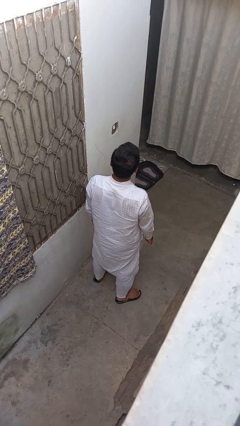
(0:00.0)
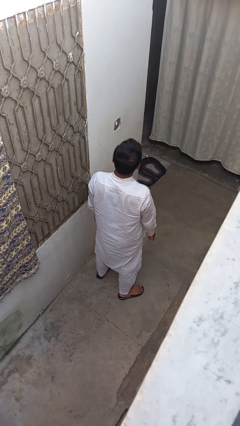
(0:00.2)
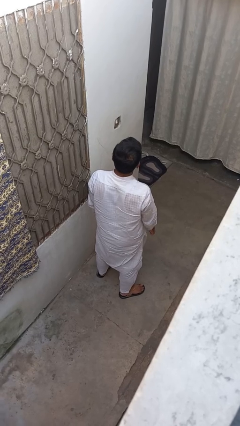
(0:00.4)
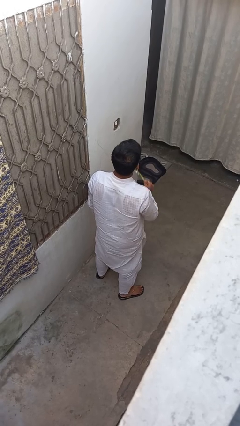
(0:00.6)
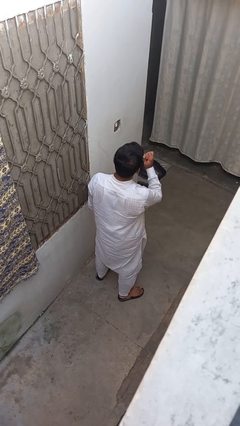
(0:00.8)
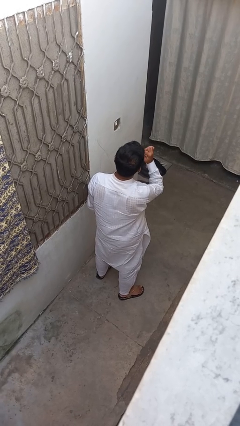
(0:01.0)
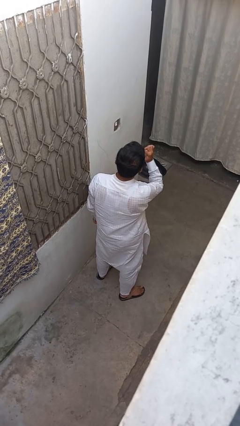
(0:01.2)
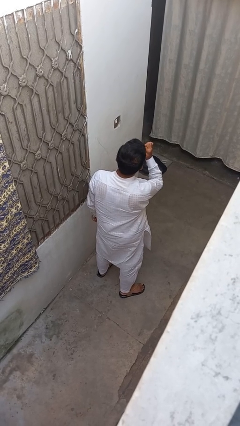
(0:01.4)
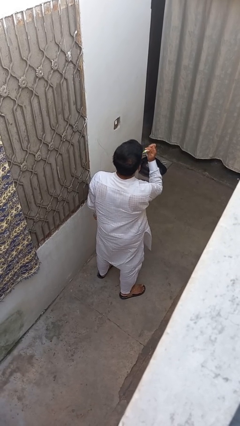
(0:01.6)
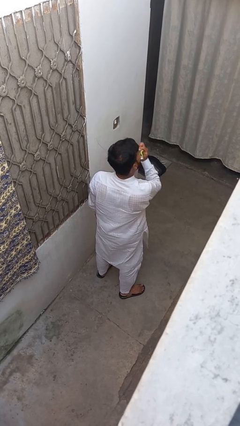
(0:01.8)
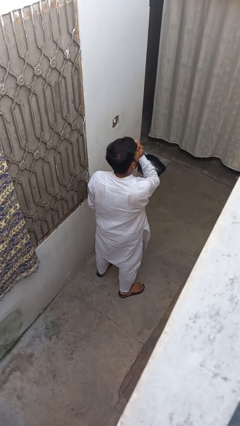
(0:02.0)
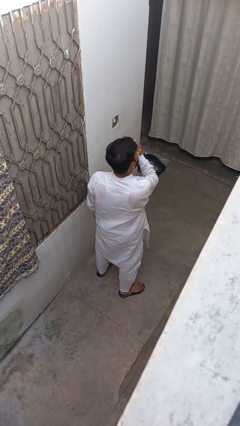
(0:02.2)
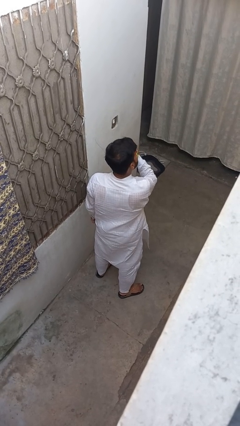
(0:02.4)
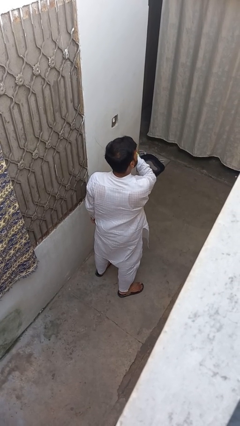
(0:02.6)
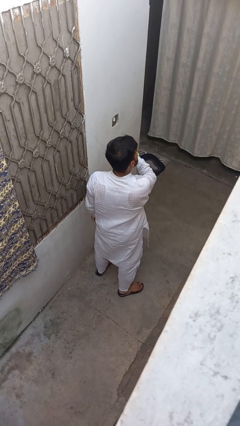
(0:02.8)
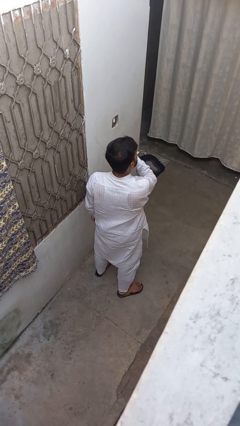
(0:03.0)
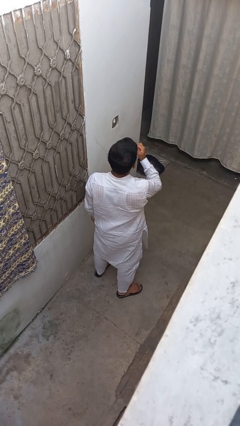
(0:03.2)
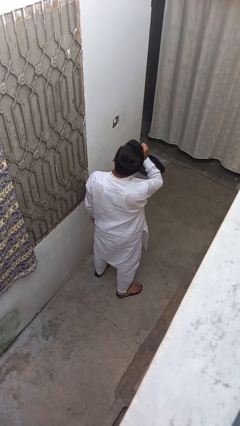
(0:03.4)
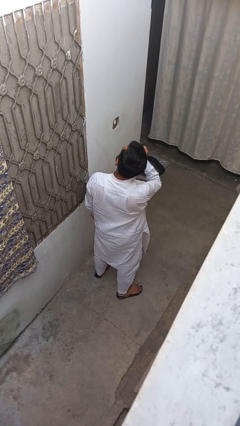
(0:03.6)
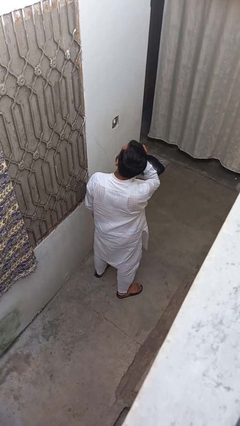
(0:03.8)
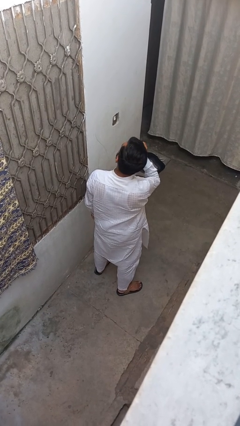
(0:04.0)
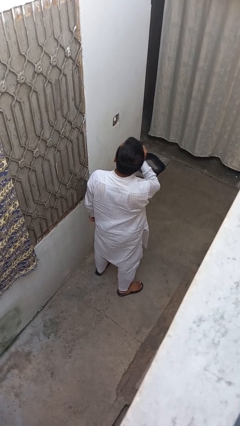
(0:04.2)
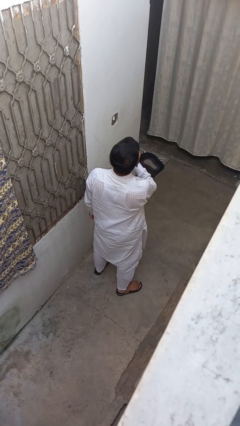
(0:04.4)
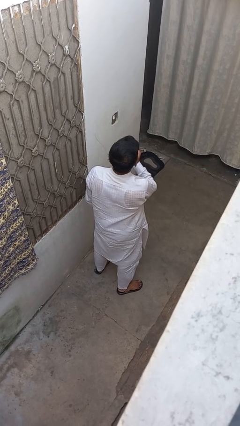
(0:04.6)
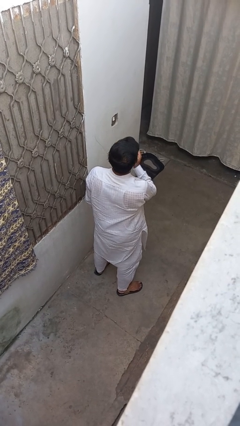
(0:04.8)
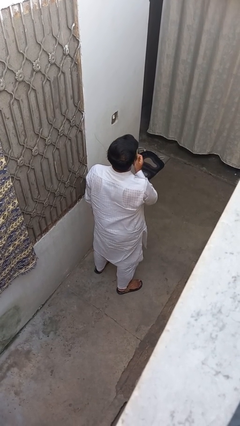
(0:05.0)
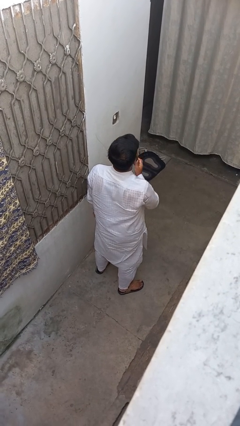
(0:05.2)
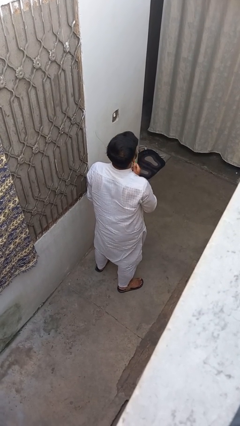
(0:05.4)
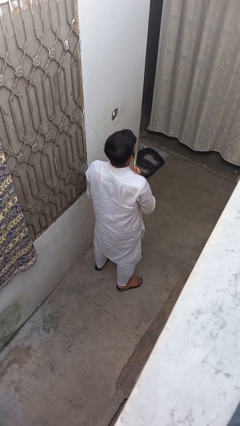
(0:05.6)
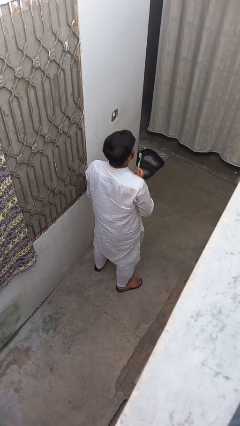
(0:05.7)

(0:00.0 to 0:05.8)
person brushes teeth

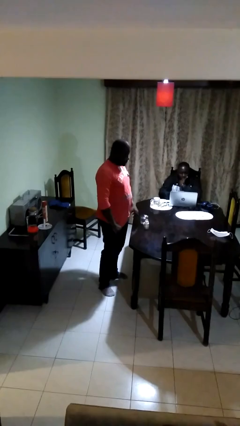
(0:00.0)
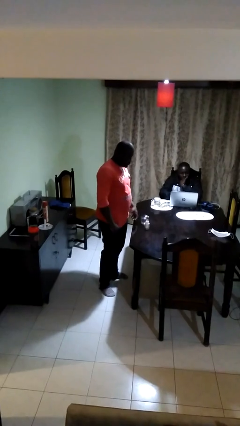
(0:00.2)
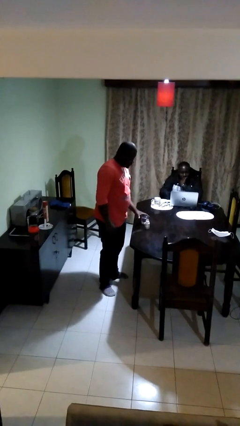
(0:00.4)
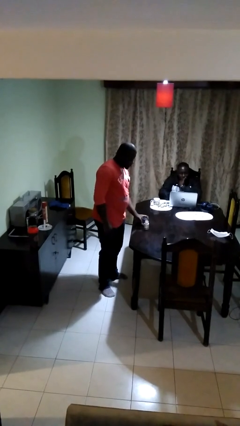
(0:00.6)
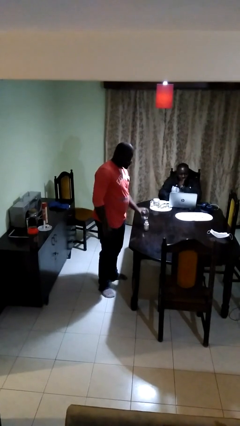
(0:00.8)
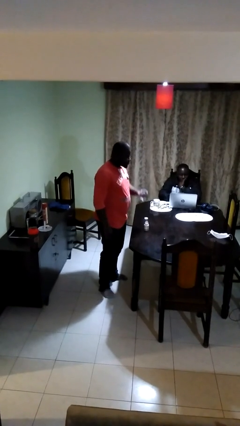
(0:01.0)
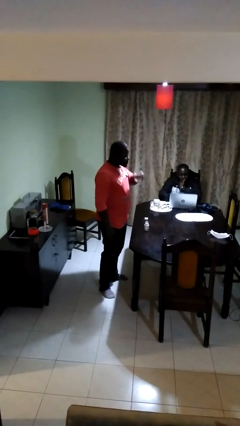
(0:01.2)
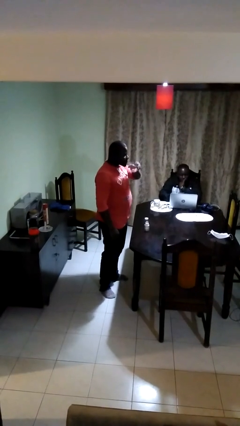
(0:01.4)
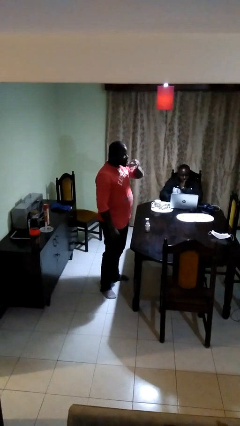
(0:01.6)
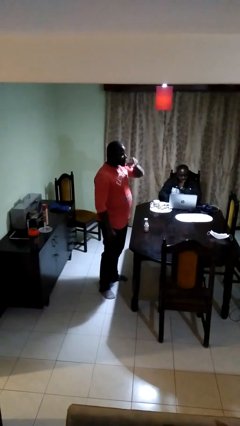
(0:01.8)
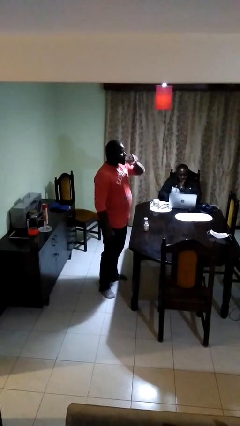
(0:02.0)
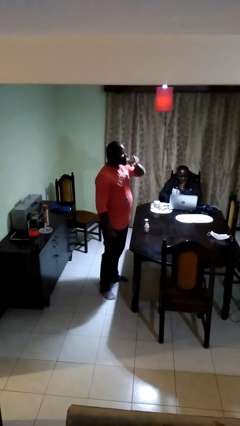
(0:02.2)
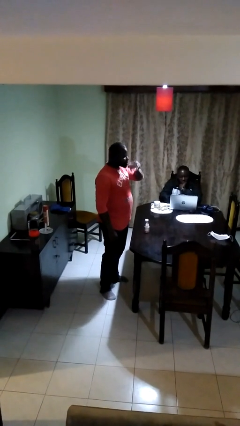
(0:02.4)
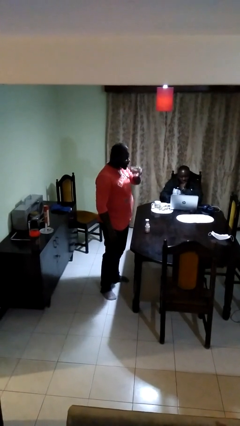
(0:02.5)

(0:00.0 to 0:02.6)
person drinks from cup

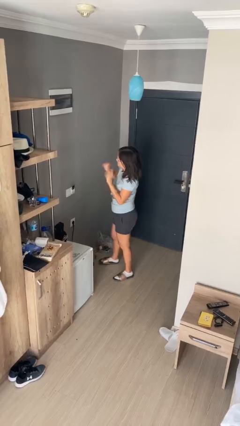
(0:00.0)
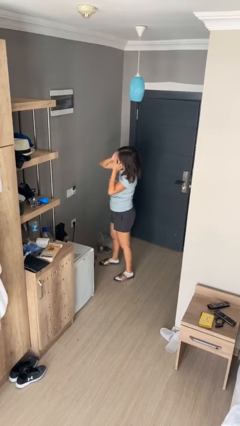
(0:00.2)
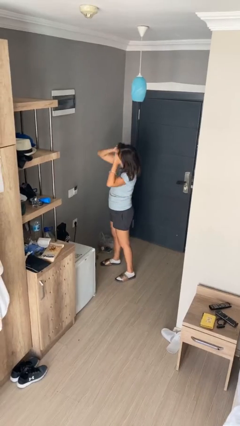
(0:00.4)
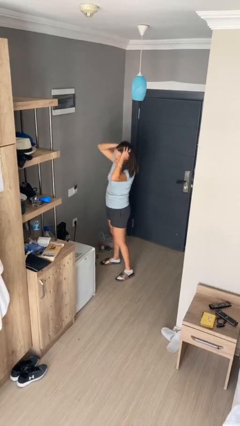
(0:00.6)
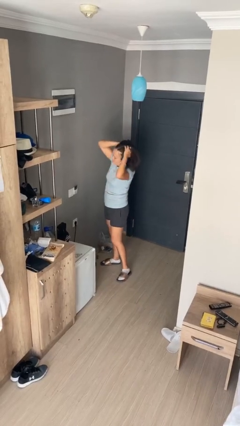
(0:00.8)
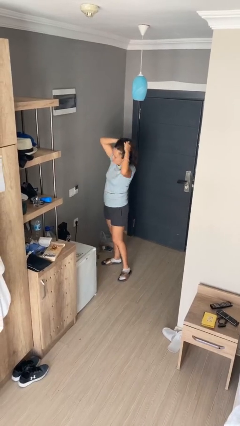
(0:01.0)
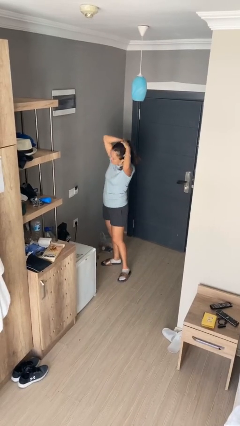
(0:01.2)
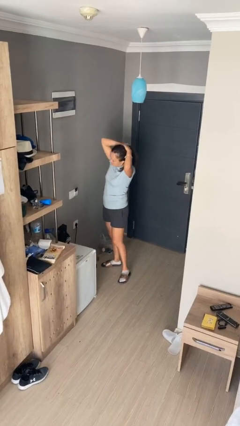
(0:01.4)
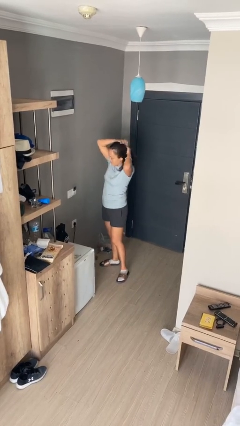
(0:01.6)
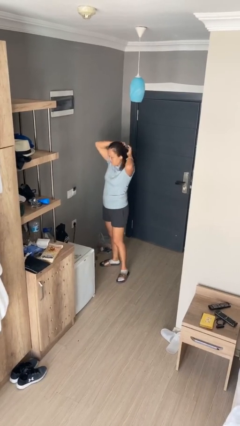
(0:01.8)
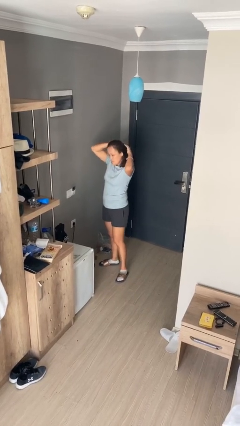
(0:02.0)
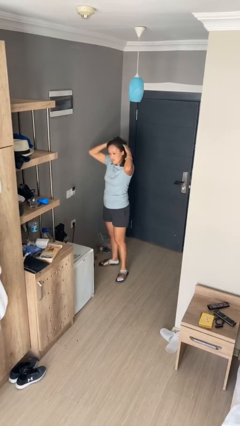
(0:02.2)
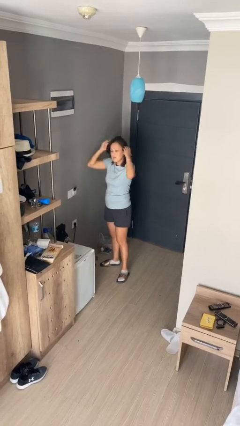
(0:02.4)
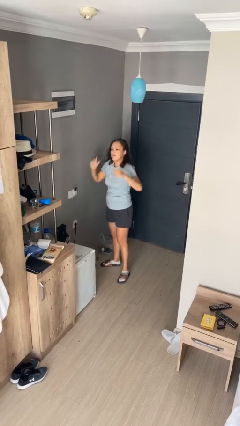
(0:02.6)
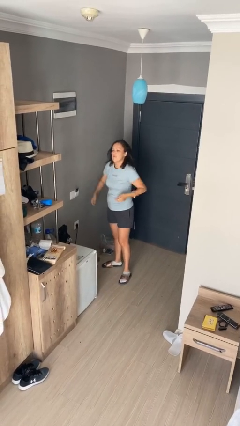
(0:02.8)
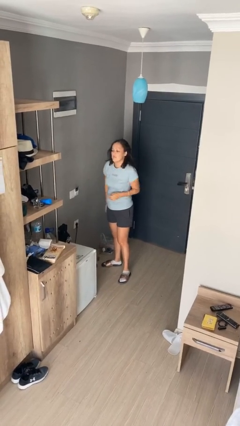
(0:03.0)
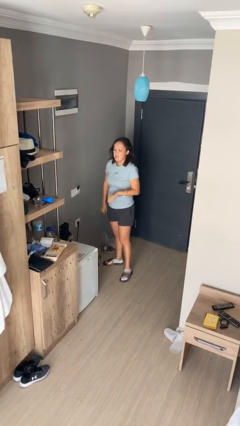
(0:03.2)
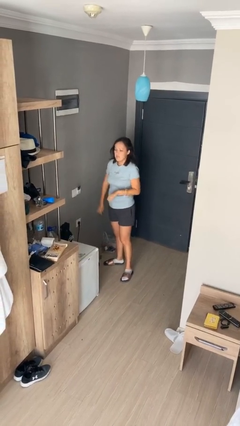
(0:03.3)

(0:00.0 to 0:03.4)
person scratches face

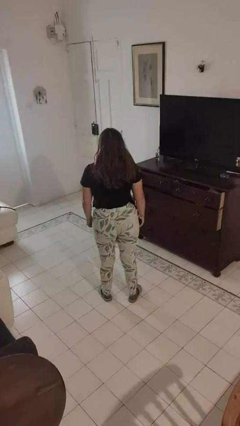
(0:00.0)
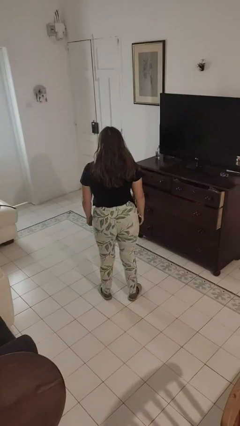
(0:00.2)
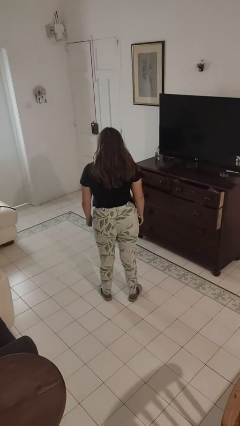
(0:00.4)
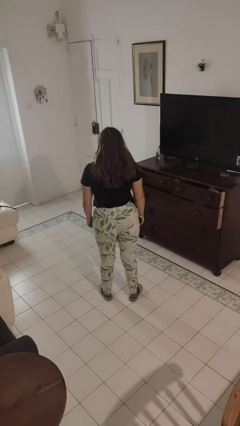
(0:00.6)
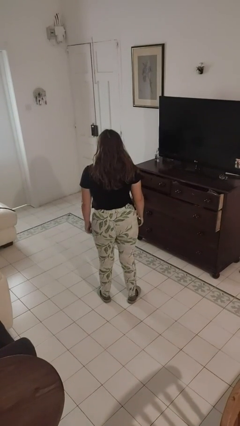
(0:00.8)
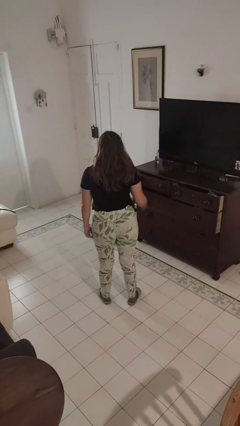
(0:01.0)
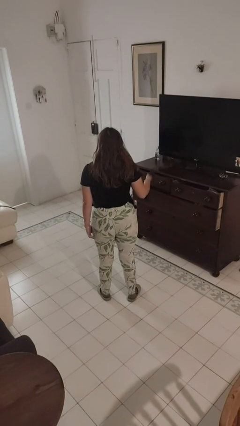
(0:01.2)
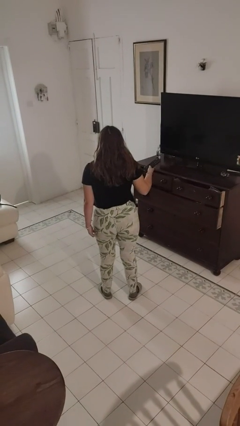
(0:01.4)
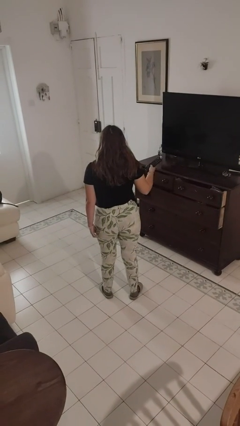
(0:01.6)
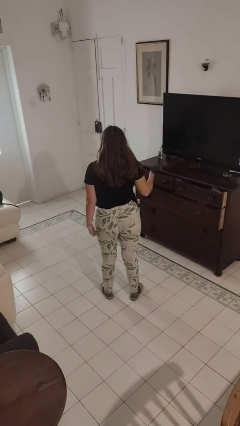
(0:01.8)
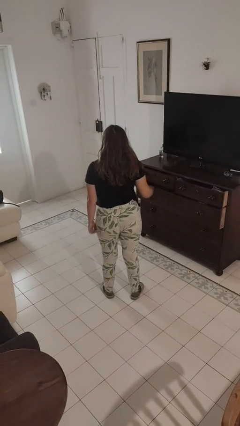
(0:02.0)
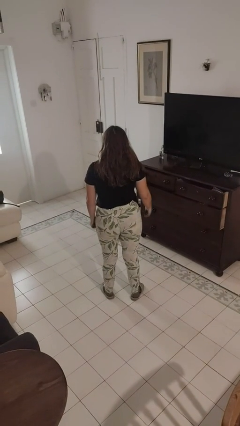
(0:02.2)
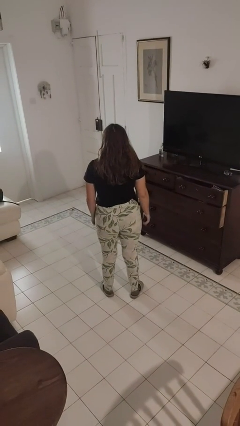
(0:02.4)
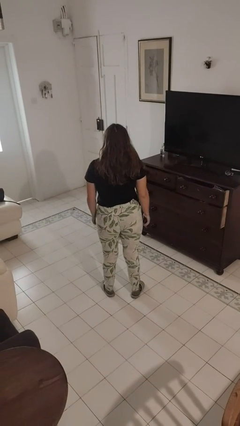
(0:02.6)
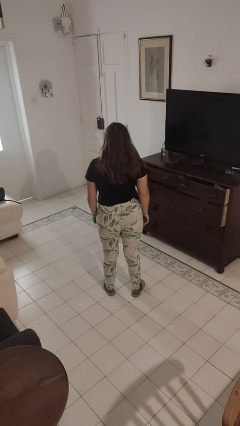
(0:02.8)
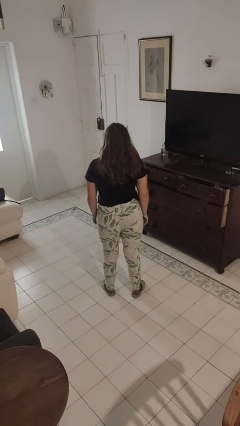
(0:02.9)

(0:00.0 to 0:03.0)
person uses television remote

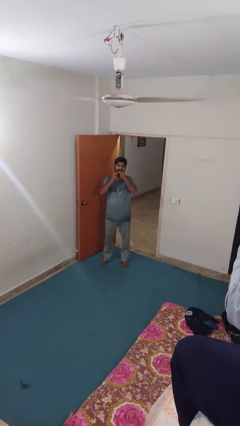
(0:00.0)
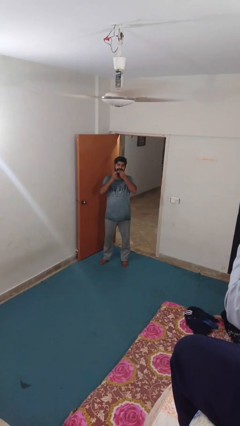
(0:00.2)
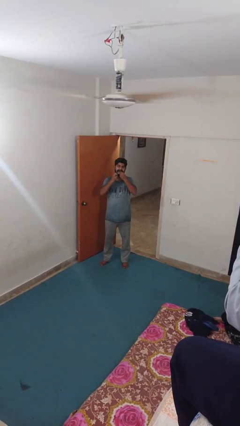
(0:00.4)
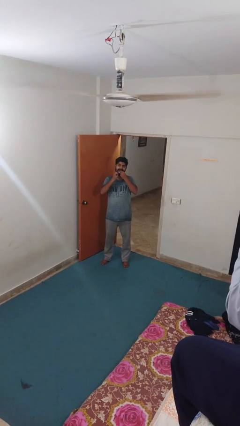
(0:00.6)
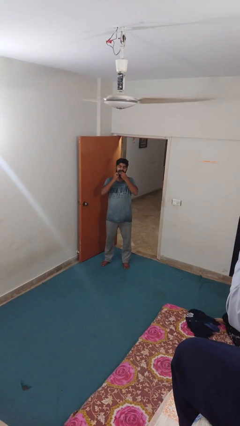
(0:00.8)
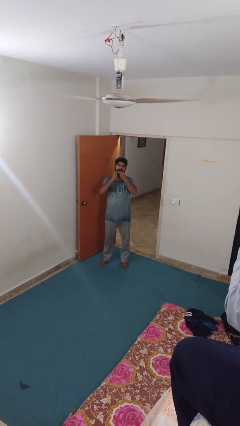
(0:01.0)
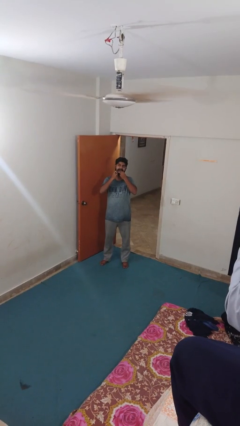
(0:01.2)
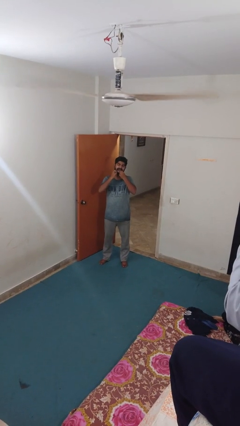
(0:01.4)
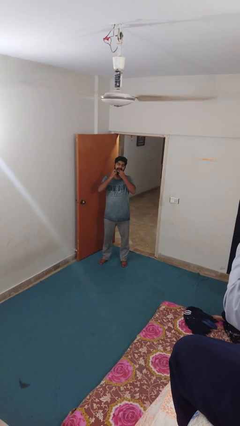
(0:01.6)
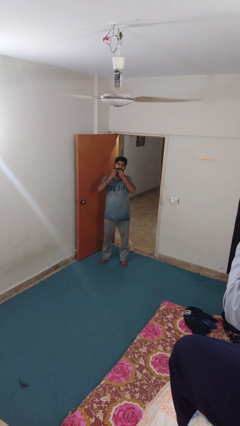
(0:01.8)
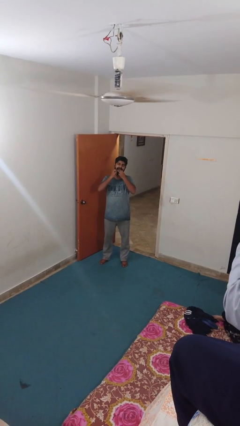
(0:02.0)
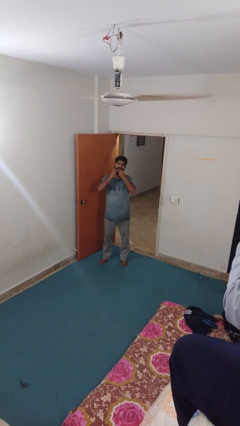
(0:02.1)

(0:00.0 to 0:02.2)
person flosses

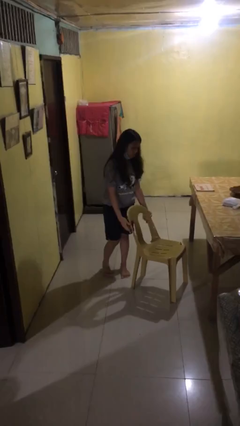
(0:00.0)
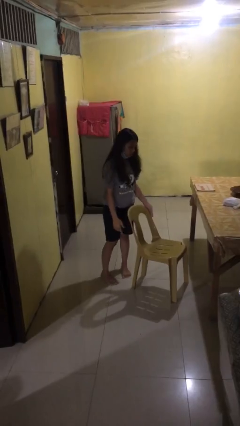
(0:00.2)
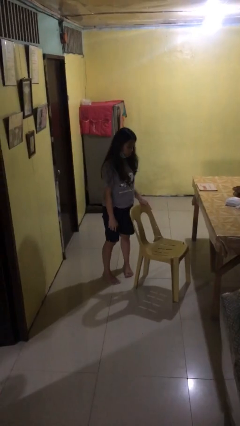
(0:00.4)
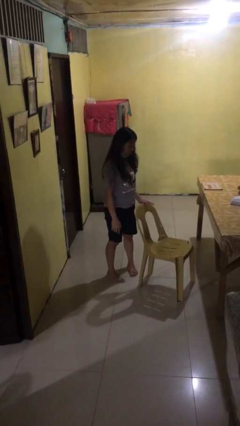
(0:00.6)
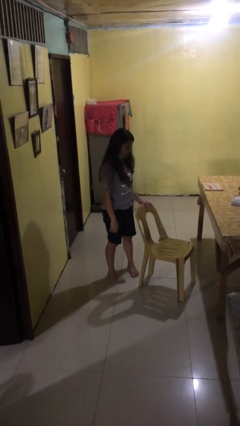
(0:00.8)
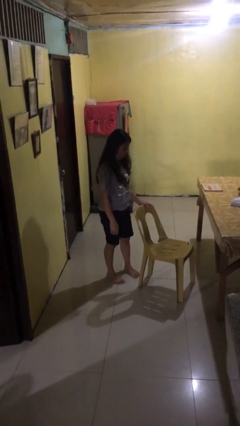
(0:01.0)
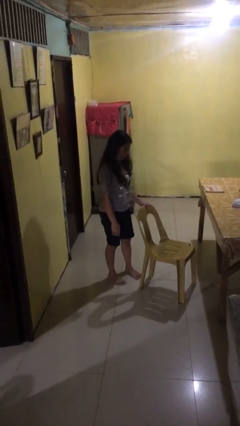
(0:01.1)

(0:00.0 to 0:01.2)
person puts down object on floor
